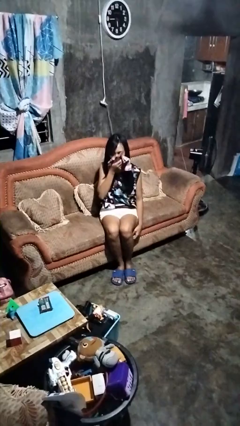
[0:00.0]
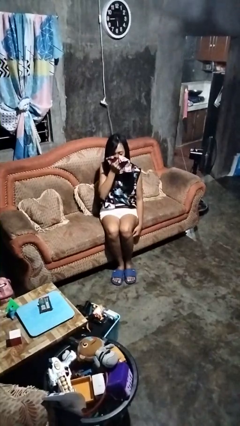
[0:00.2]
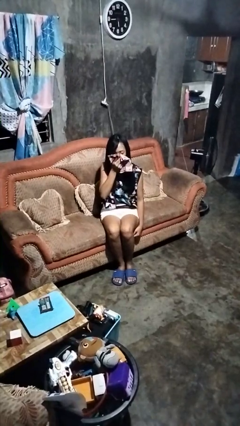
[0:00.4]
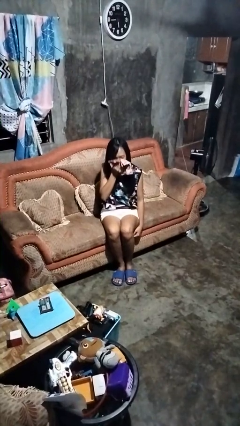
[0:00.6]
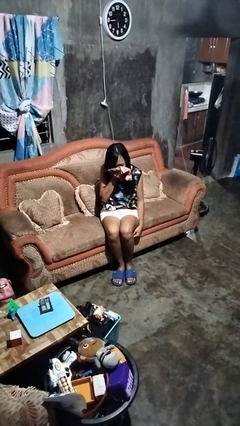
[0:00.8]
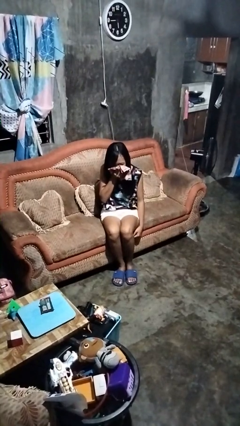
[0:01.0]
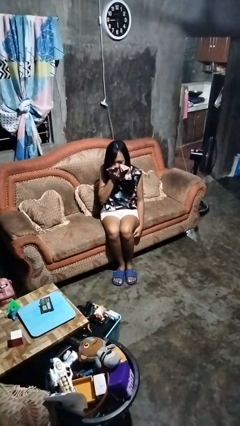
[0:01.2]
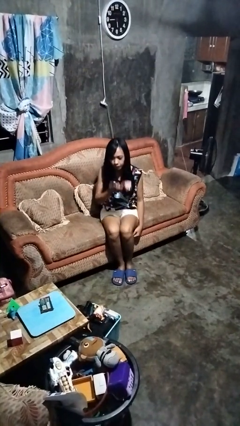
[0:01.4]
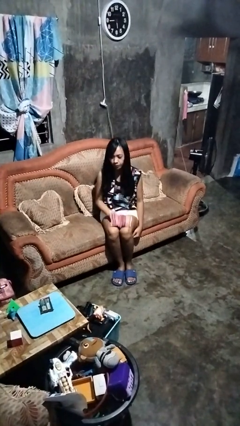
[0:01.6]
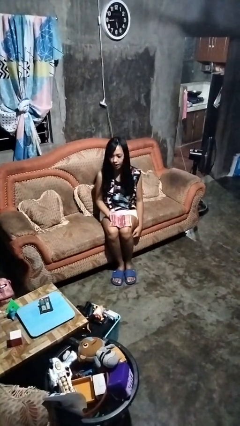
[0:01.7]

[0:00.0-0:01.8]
person blows nose

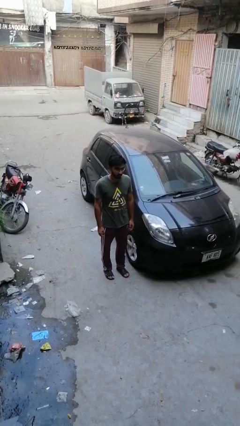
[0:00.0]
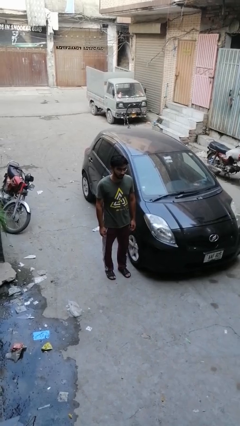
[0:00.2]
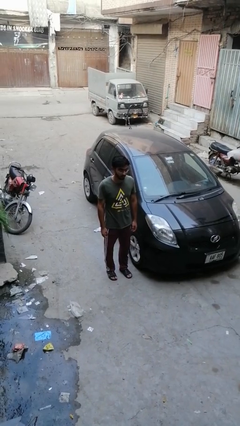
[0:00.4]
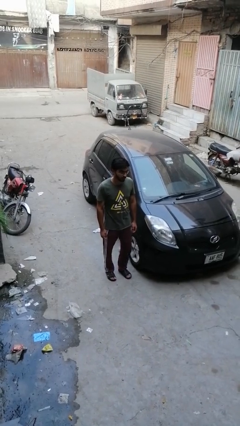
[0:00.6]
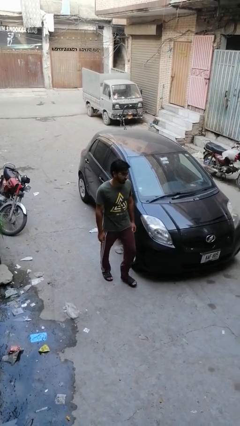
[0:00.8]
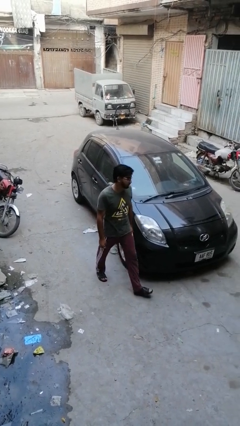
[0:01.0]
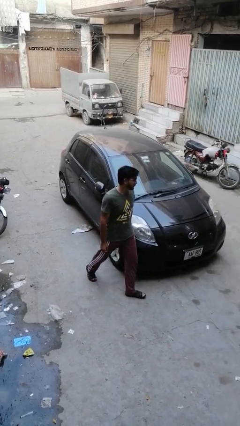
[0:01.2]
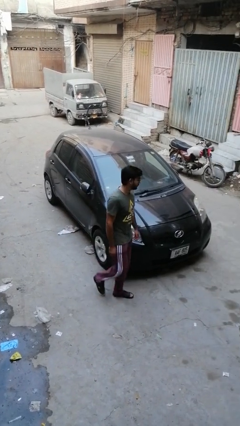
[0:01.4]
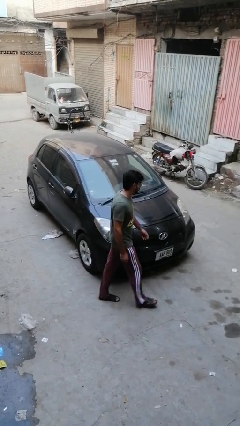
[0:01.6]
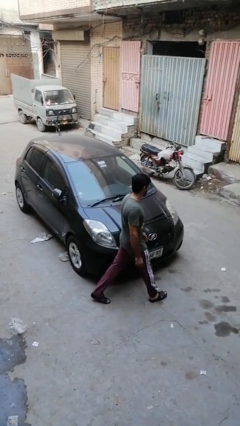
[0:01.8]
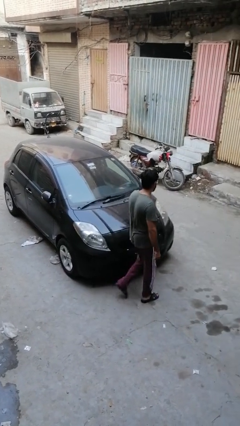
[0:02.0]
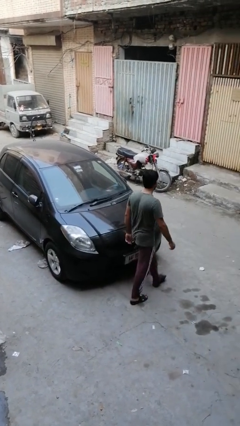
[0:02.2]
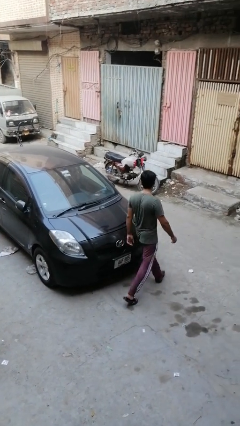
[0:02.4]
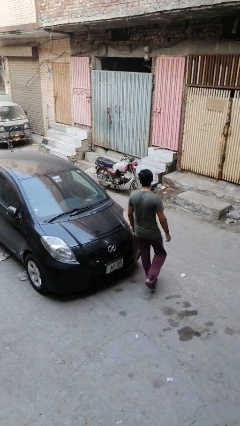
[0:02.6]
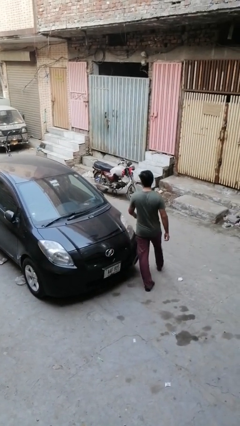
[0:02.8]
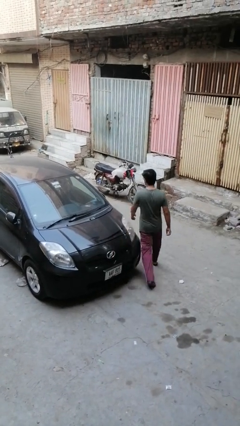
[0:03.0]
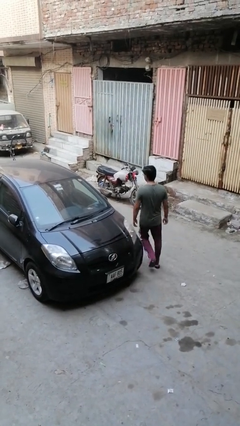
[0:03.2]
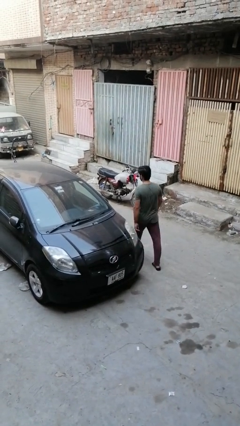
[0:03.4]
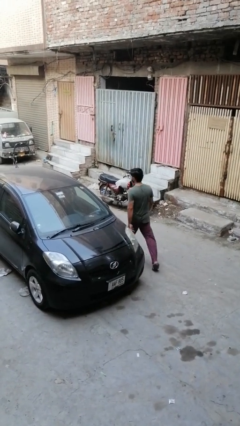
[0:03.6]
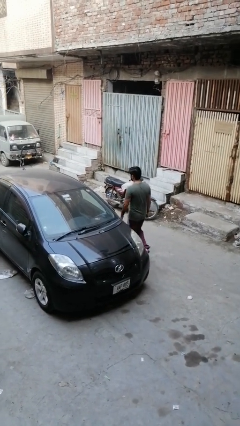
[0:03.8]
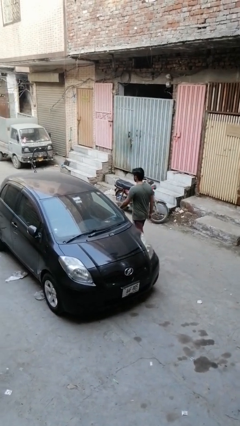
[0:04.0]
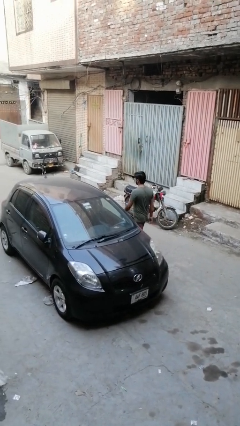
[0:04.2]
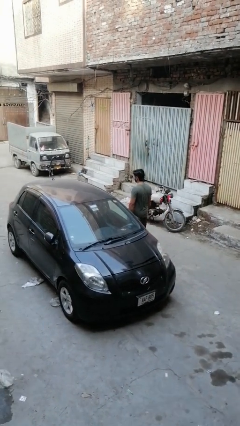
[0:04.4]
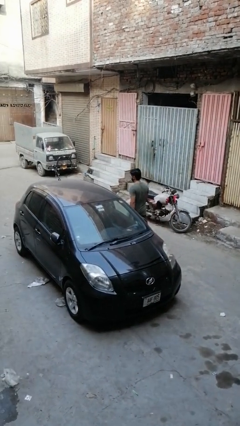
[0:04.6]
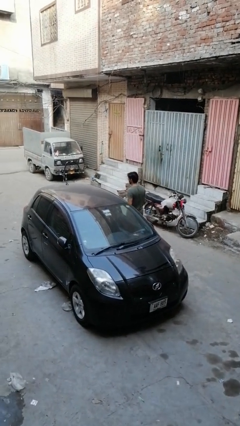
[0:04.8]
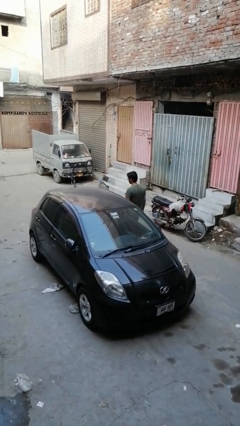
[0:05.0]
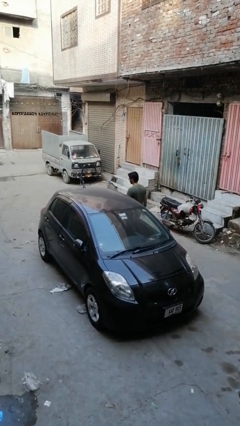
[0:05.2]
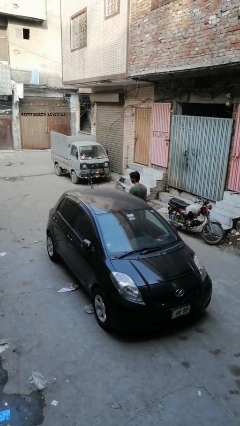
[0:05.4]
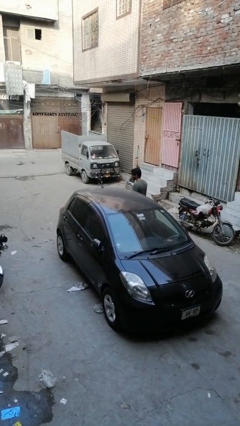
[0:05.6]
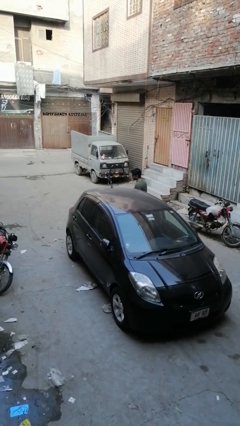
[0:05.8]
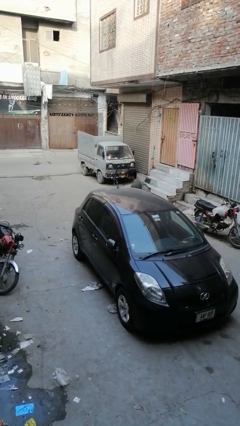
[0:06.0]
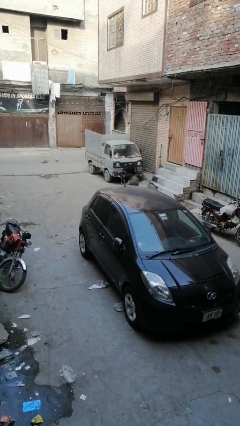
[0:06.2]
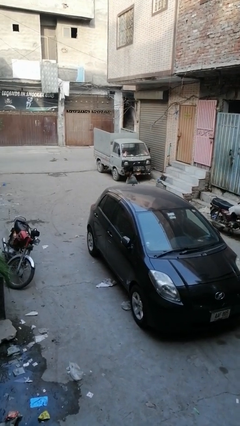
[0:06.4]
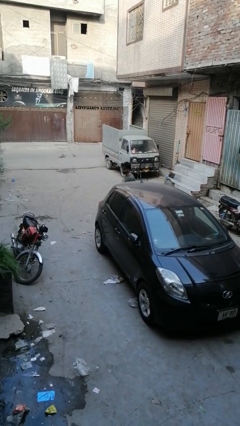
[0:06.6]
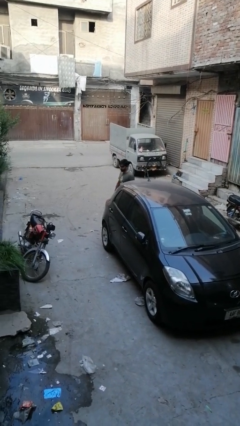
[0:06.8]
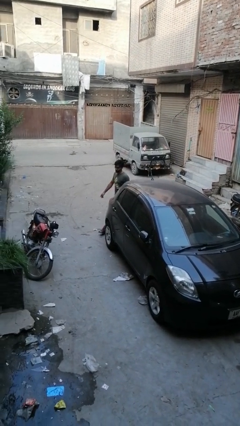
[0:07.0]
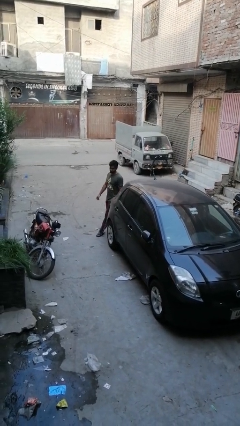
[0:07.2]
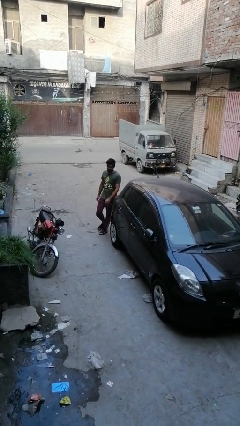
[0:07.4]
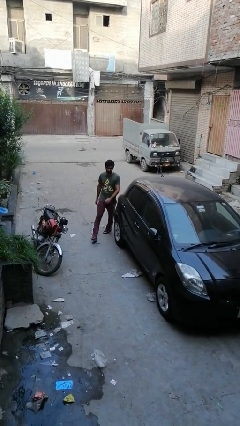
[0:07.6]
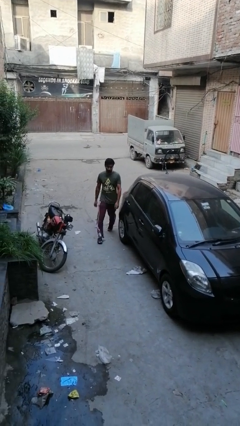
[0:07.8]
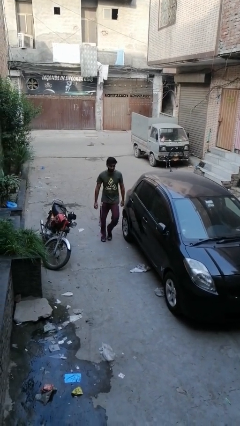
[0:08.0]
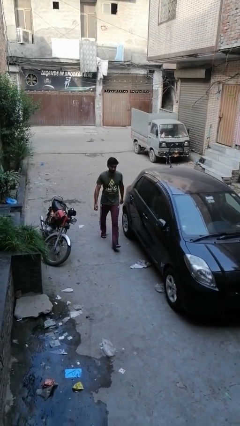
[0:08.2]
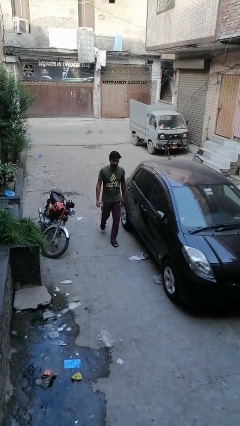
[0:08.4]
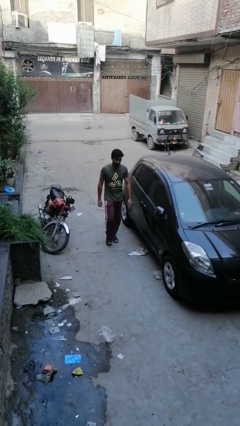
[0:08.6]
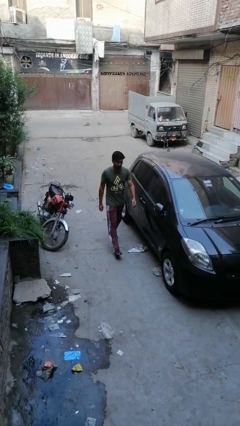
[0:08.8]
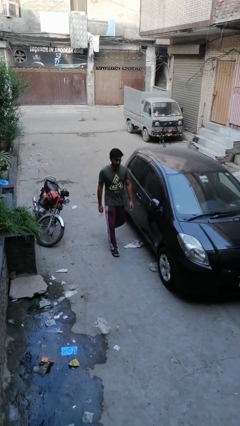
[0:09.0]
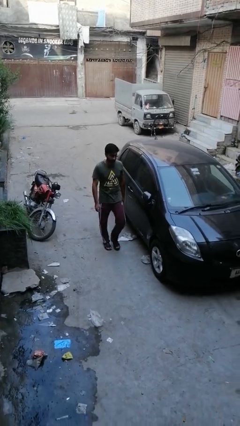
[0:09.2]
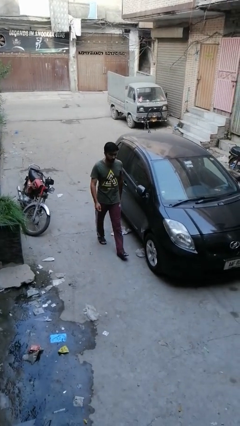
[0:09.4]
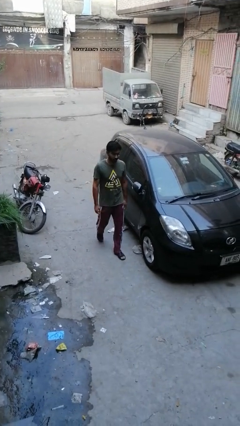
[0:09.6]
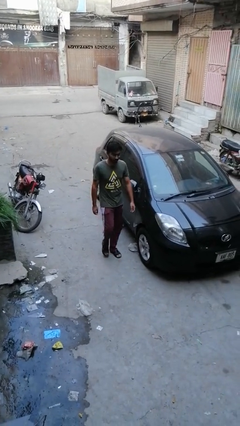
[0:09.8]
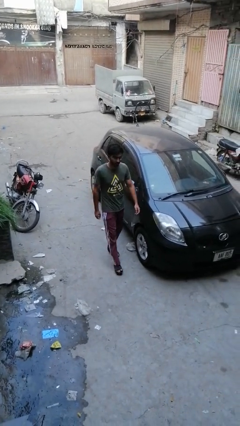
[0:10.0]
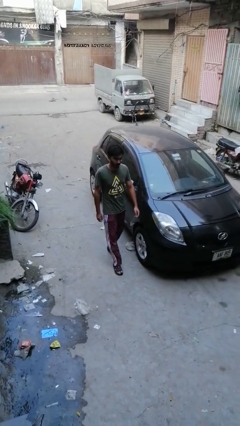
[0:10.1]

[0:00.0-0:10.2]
person walks around car

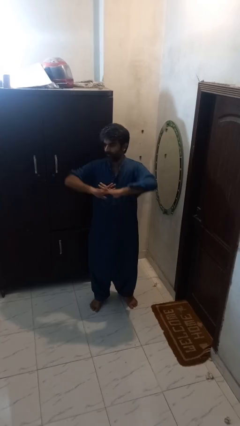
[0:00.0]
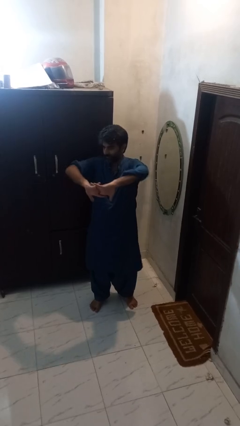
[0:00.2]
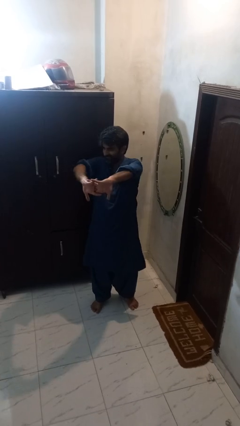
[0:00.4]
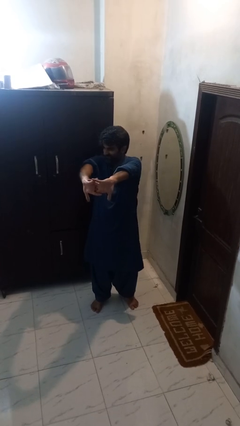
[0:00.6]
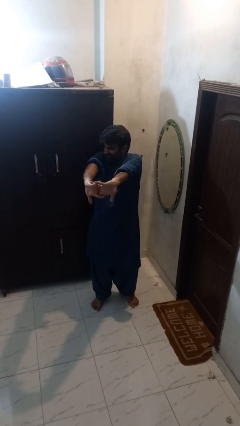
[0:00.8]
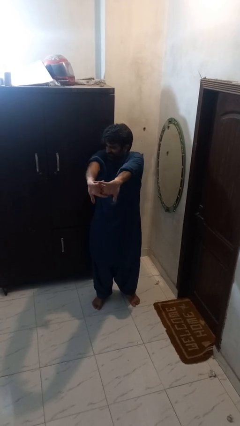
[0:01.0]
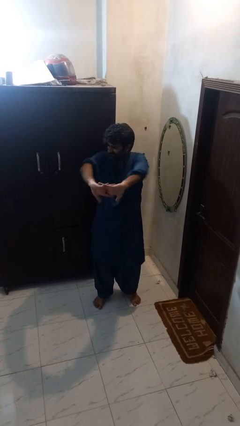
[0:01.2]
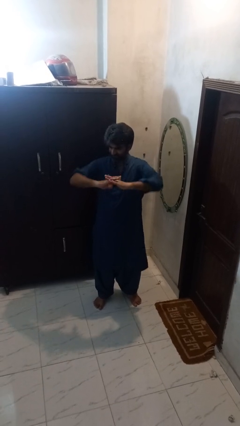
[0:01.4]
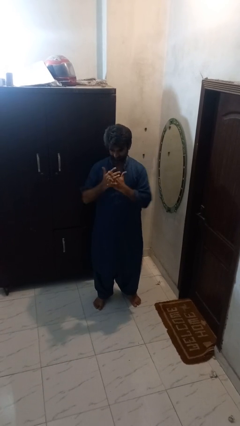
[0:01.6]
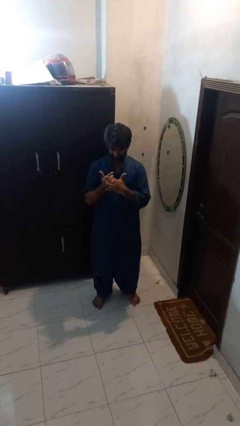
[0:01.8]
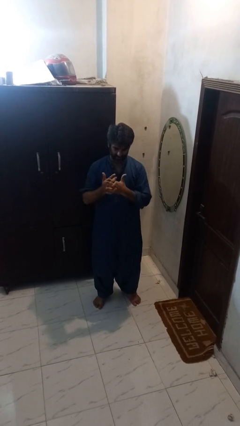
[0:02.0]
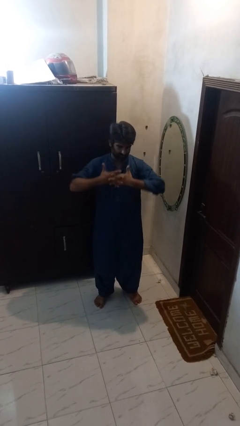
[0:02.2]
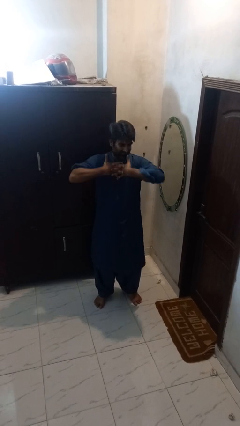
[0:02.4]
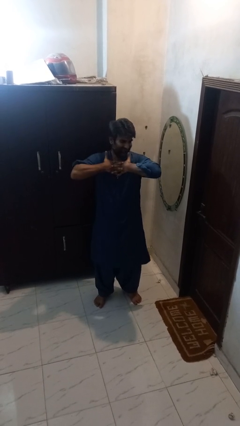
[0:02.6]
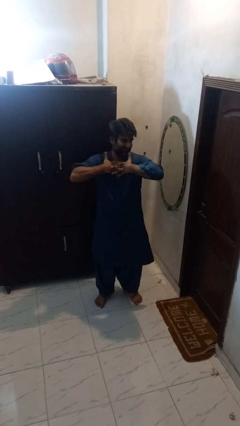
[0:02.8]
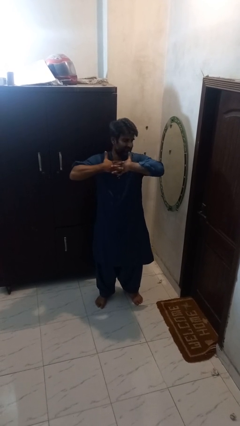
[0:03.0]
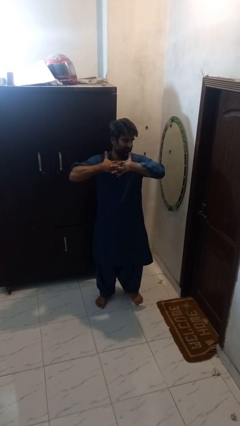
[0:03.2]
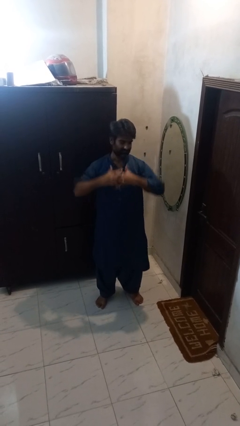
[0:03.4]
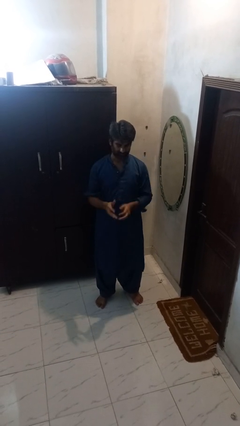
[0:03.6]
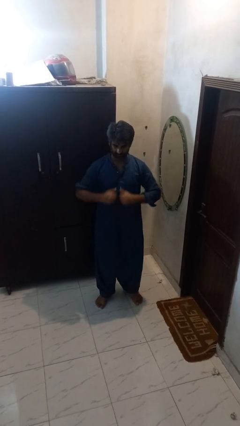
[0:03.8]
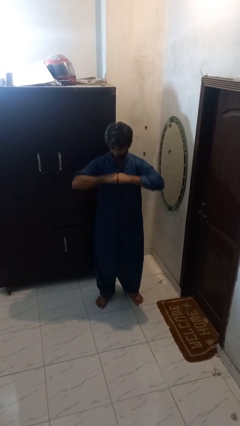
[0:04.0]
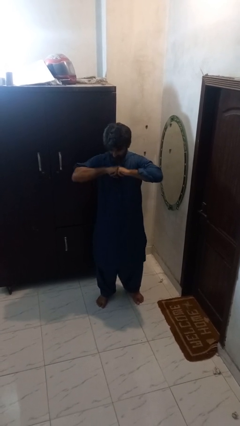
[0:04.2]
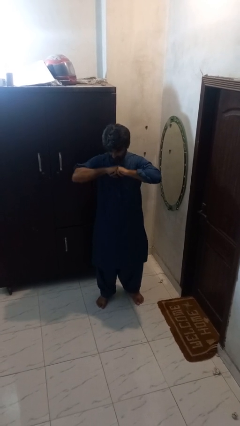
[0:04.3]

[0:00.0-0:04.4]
person cracks knuckles

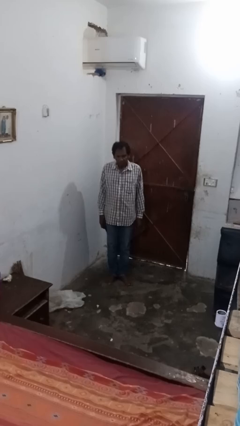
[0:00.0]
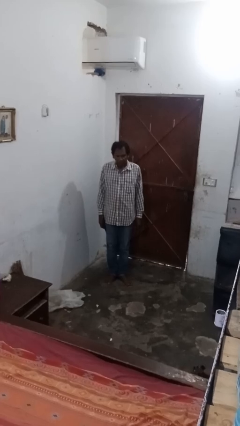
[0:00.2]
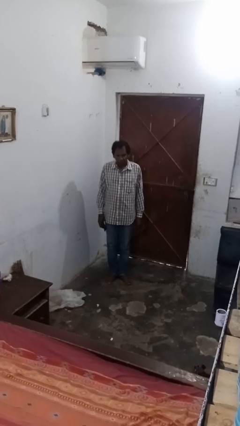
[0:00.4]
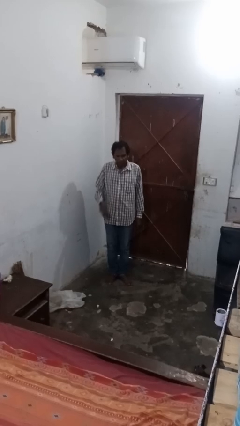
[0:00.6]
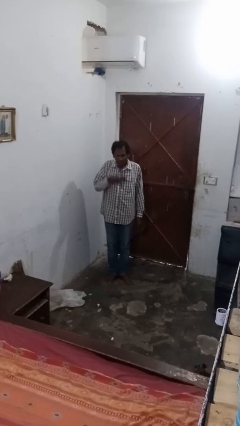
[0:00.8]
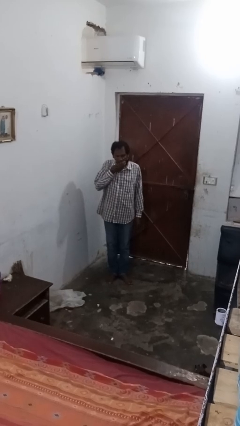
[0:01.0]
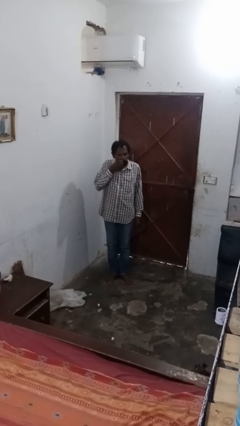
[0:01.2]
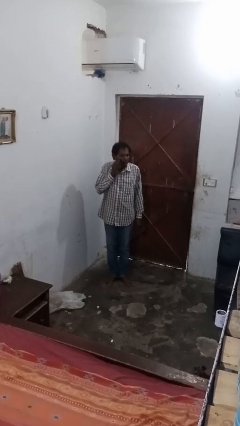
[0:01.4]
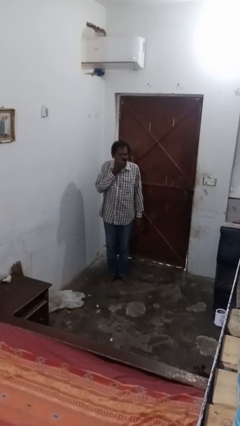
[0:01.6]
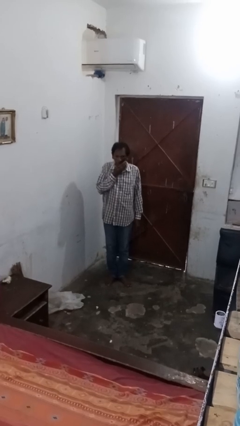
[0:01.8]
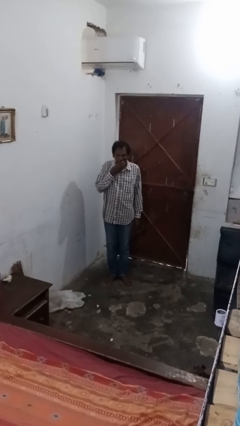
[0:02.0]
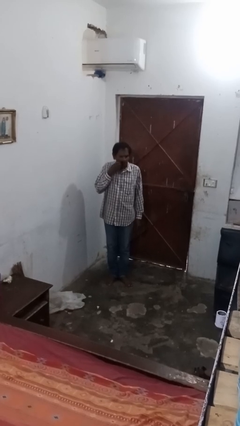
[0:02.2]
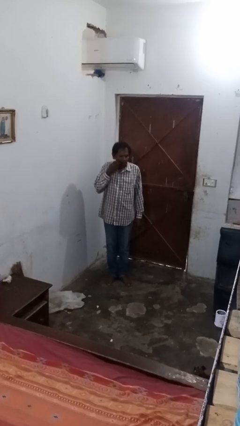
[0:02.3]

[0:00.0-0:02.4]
person wipes mouth with napkin
